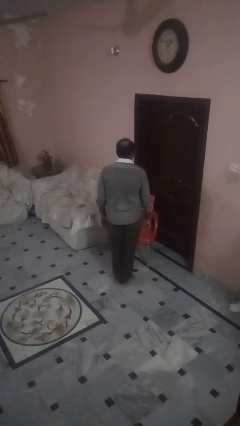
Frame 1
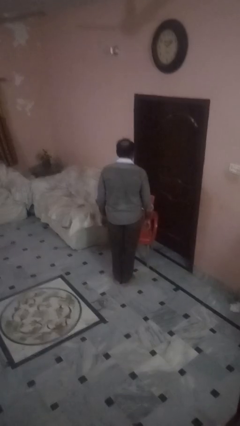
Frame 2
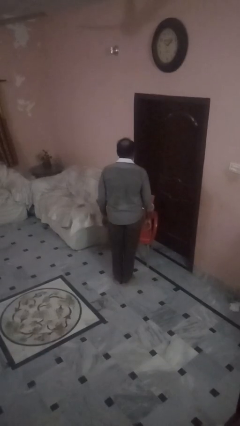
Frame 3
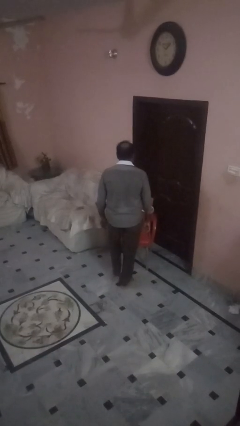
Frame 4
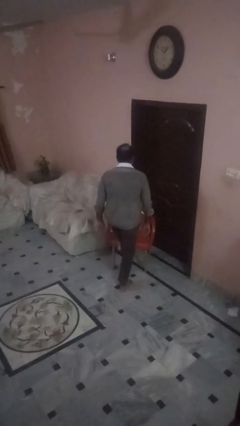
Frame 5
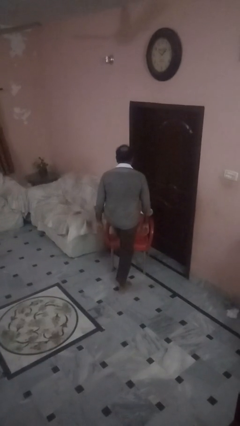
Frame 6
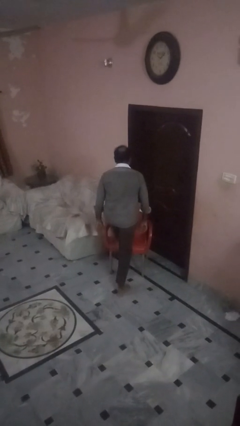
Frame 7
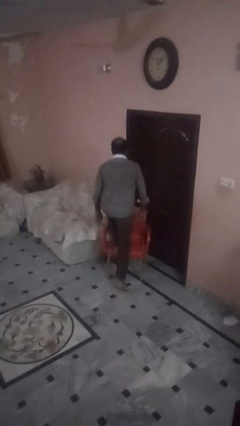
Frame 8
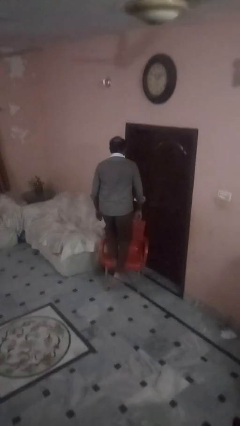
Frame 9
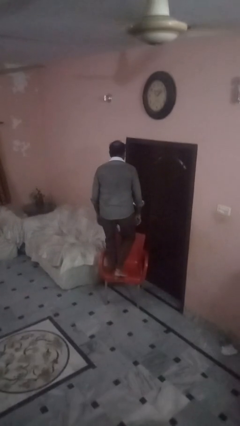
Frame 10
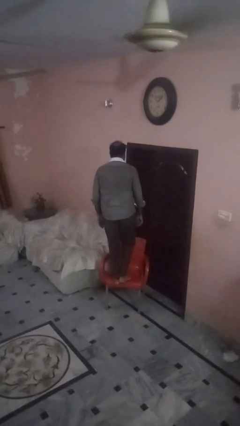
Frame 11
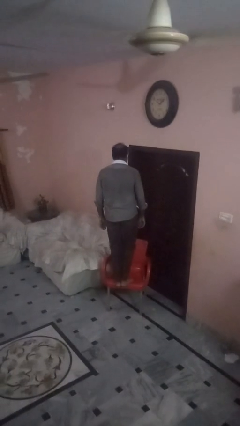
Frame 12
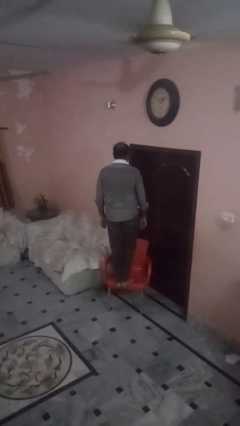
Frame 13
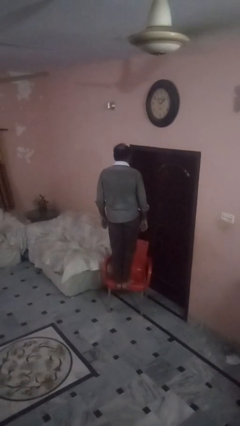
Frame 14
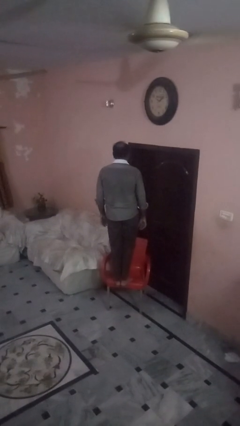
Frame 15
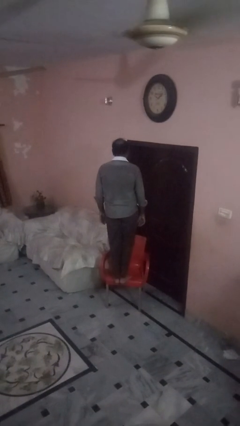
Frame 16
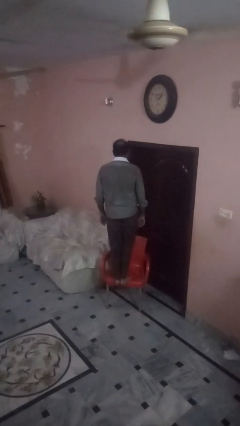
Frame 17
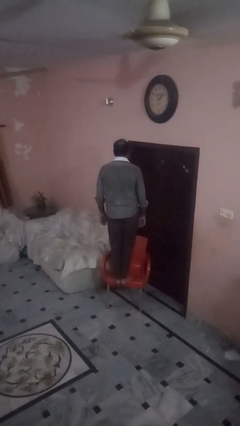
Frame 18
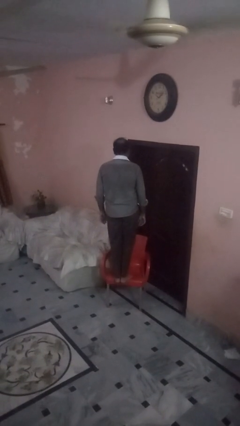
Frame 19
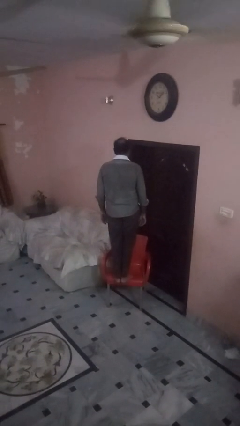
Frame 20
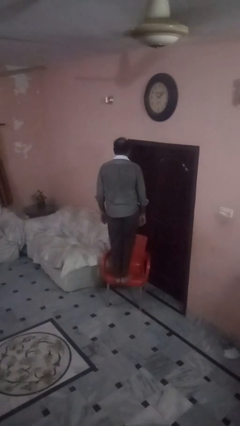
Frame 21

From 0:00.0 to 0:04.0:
person climbs on chair

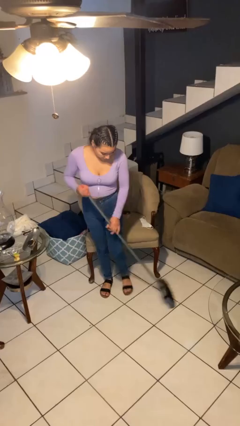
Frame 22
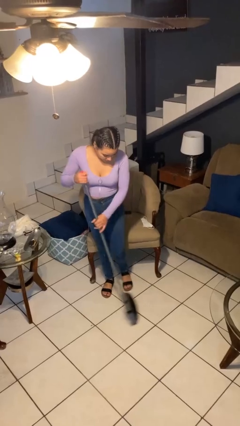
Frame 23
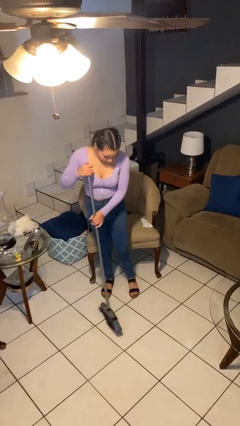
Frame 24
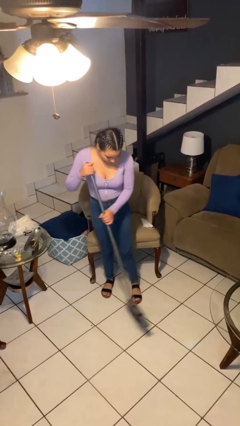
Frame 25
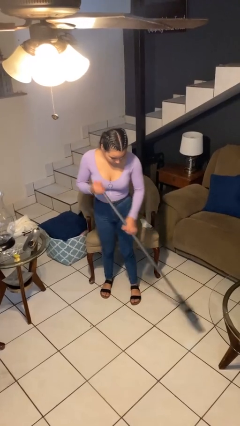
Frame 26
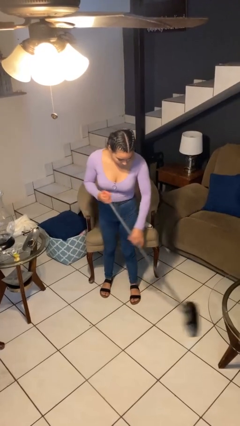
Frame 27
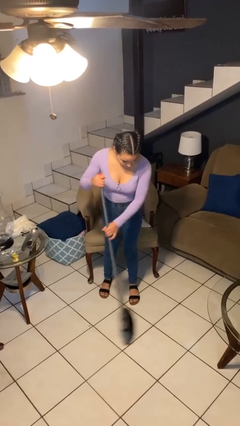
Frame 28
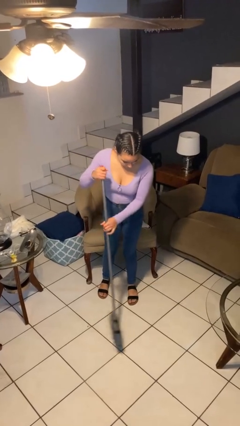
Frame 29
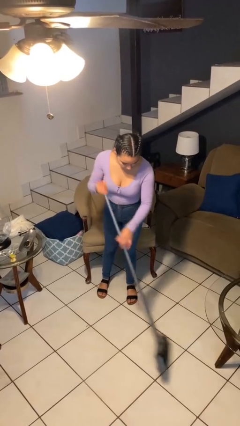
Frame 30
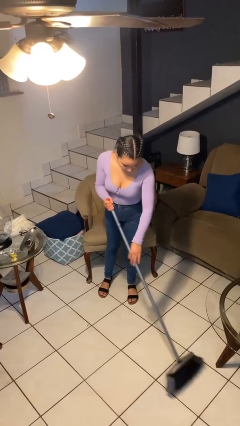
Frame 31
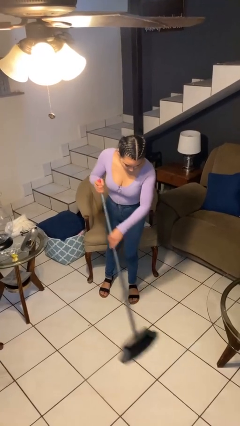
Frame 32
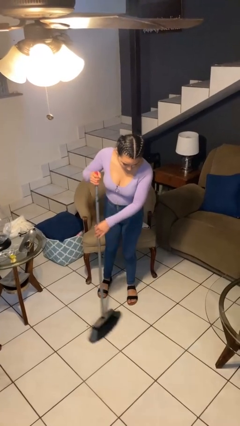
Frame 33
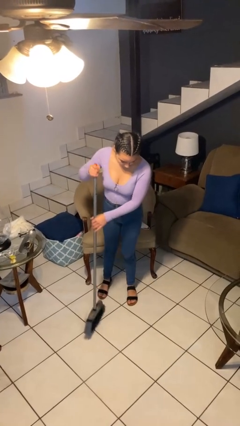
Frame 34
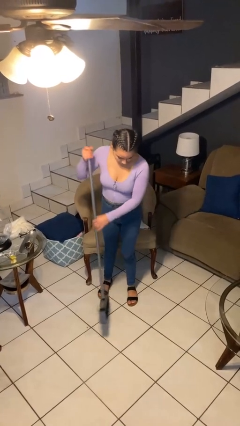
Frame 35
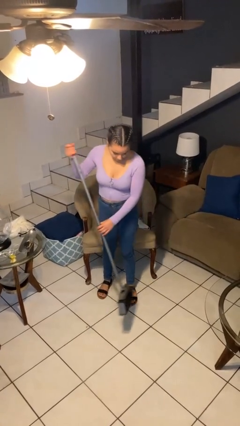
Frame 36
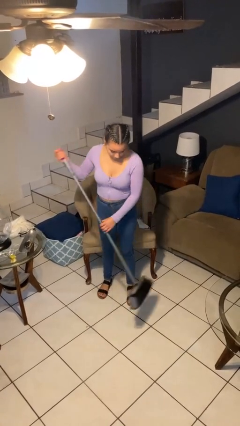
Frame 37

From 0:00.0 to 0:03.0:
person sweeps floor

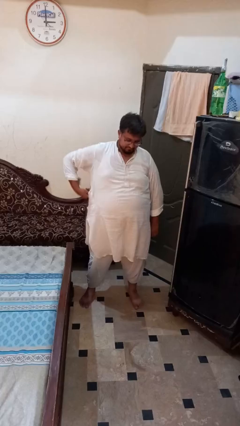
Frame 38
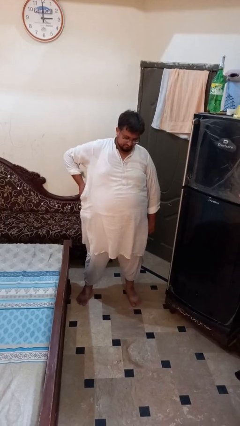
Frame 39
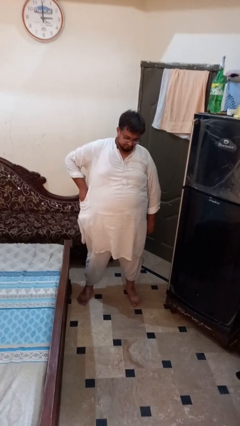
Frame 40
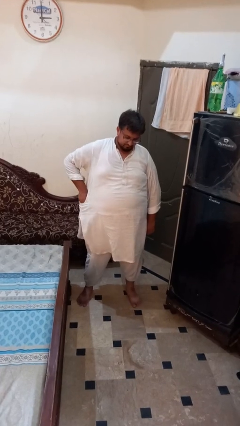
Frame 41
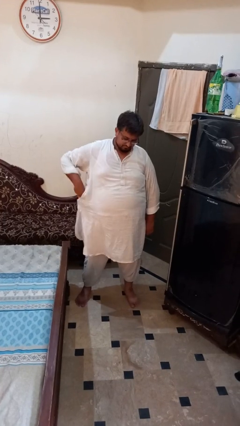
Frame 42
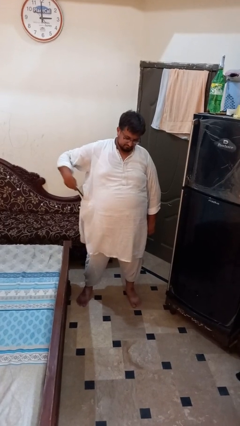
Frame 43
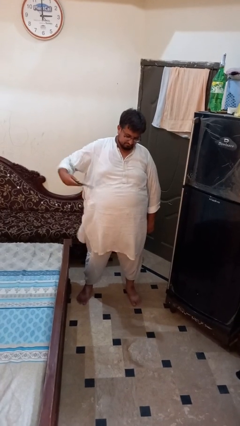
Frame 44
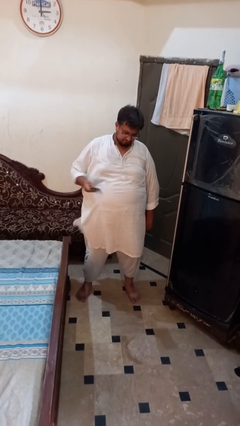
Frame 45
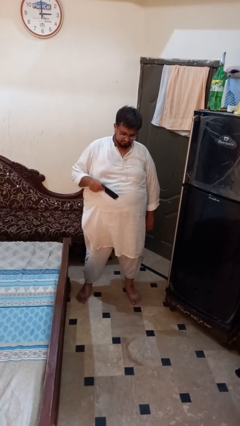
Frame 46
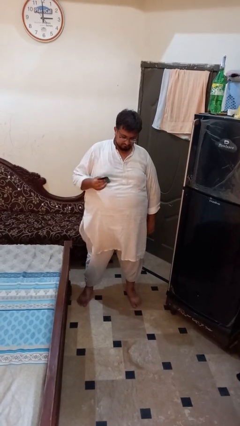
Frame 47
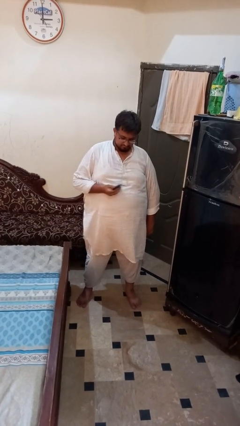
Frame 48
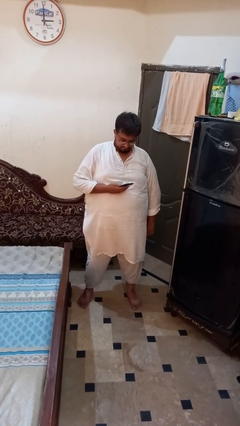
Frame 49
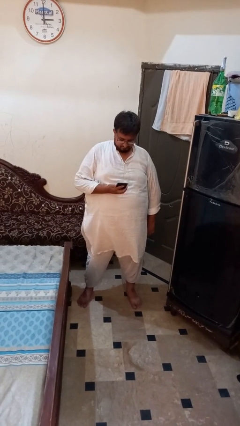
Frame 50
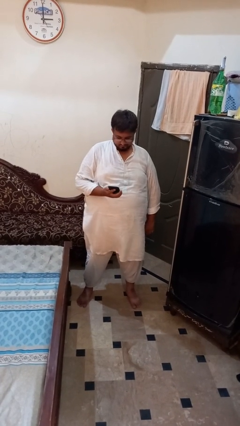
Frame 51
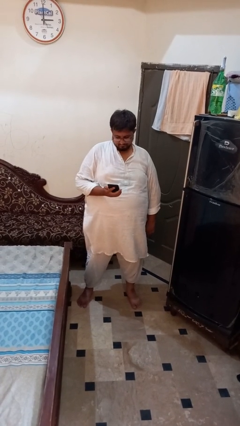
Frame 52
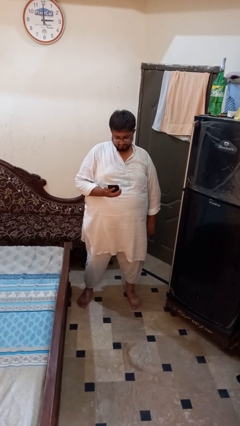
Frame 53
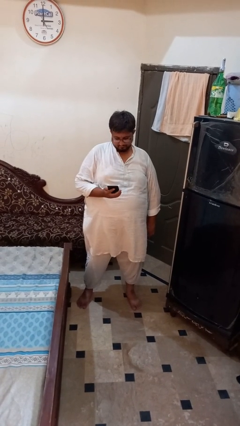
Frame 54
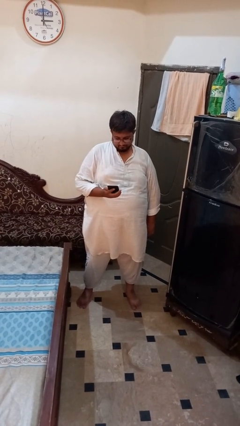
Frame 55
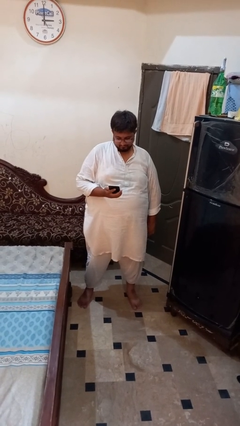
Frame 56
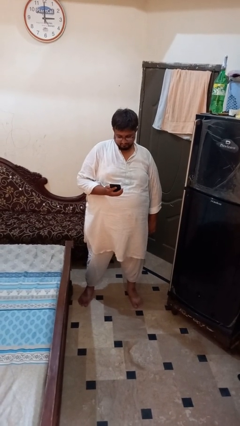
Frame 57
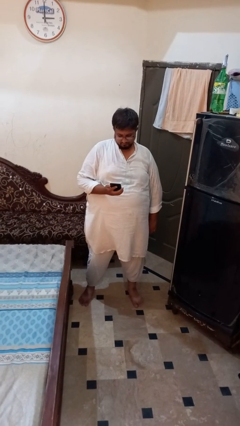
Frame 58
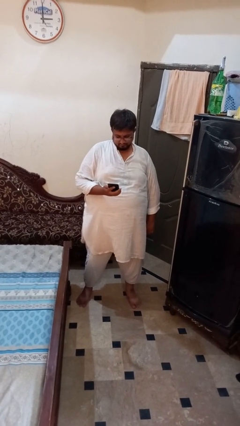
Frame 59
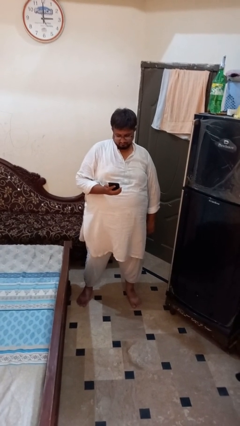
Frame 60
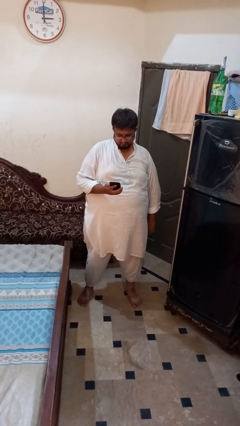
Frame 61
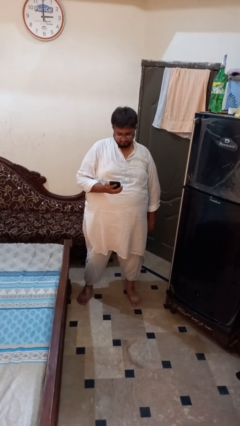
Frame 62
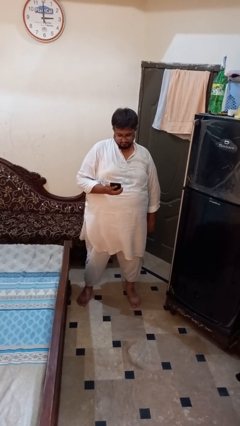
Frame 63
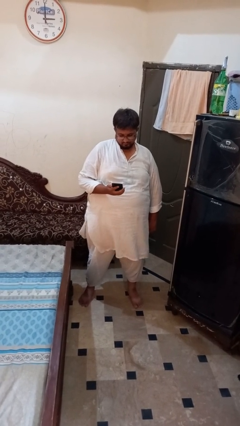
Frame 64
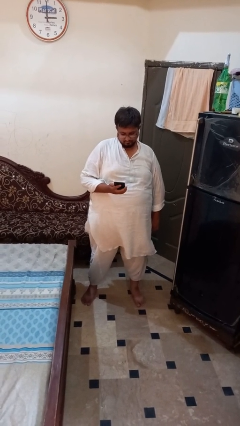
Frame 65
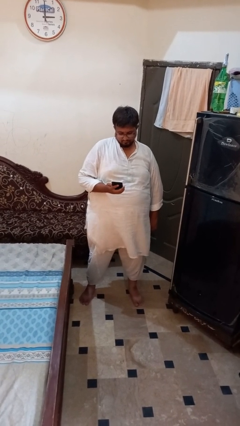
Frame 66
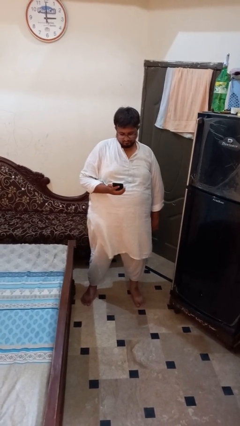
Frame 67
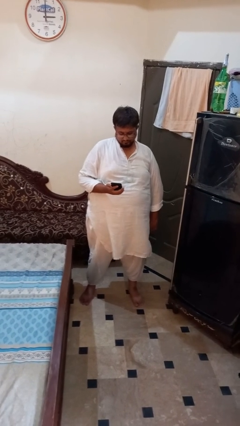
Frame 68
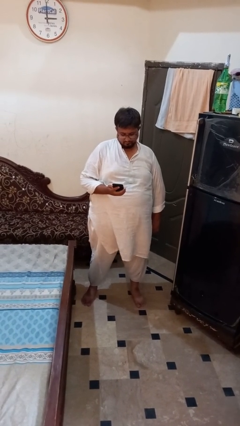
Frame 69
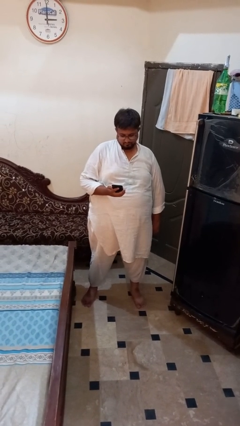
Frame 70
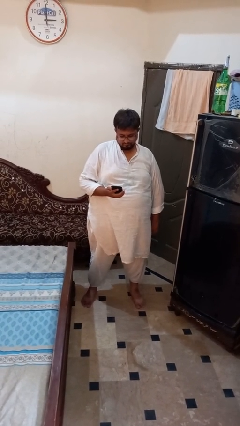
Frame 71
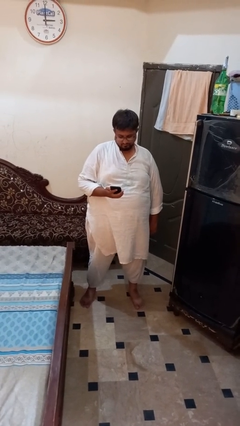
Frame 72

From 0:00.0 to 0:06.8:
person takes phone from pocket

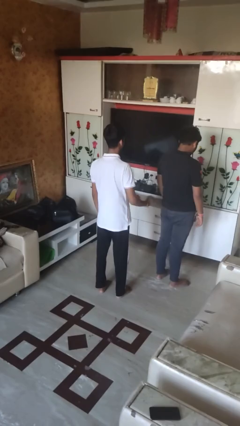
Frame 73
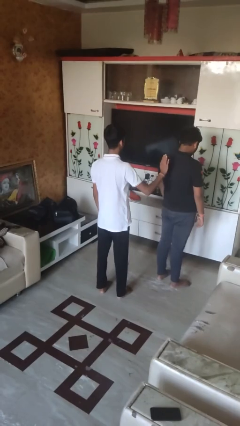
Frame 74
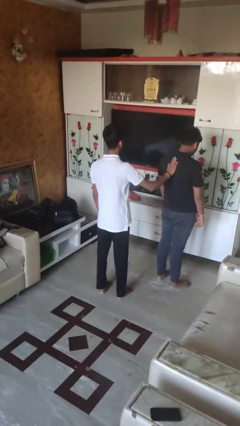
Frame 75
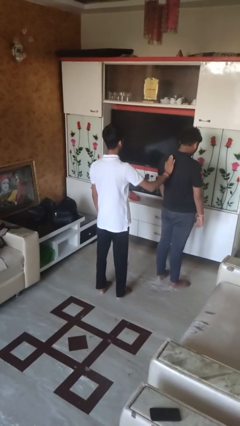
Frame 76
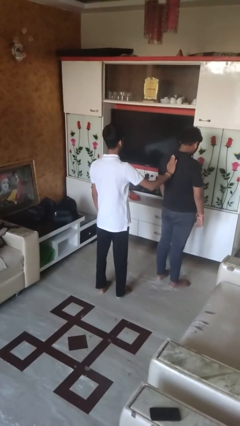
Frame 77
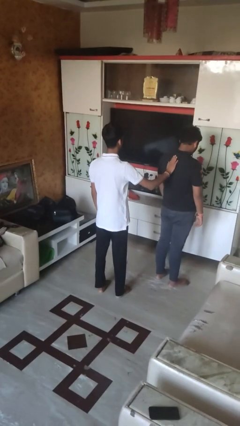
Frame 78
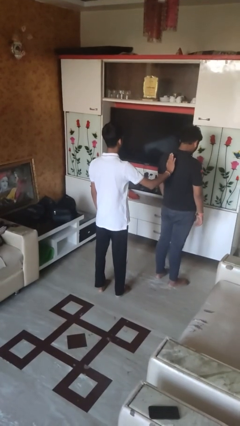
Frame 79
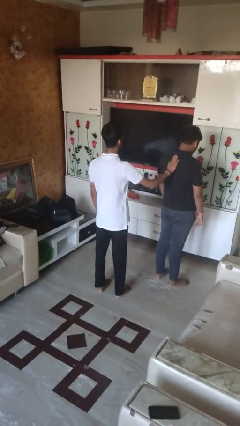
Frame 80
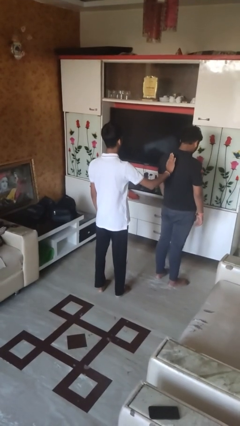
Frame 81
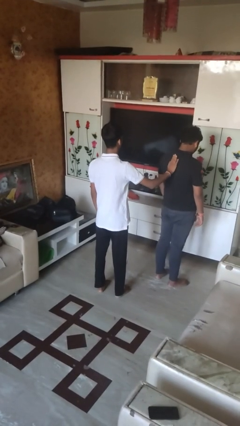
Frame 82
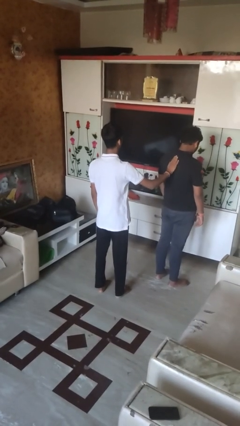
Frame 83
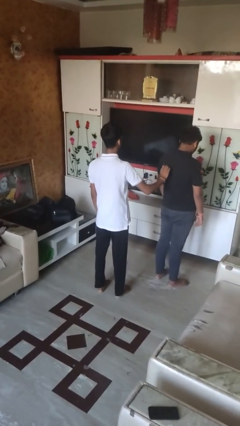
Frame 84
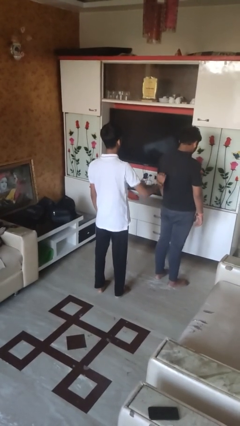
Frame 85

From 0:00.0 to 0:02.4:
person touches back of person

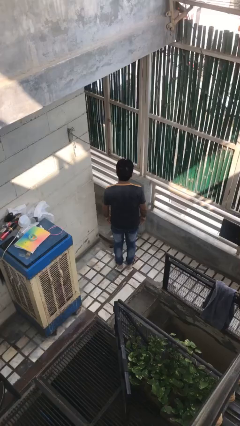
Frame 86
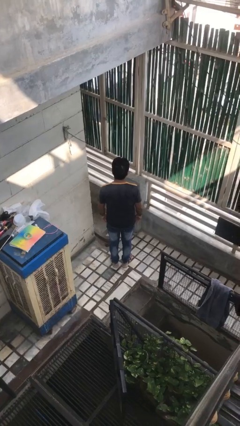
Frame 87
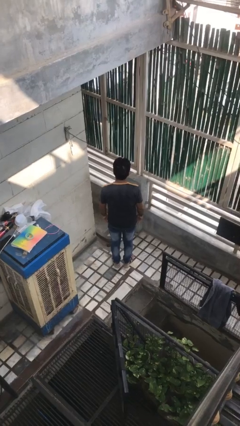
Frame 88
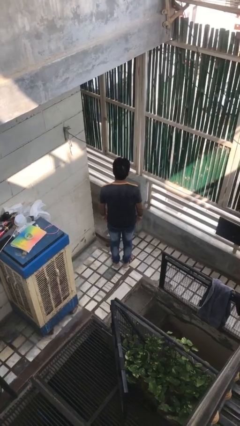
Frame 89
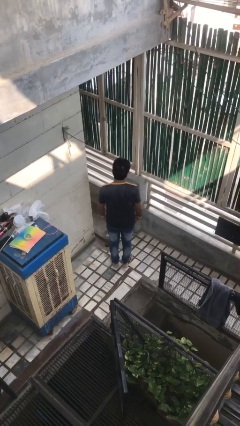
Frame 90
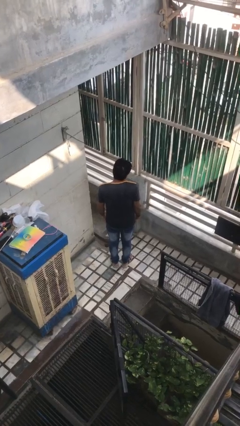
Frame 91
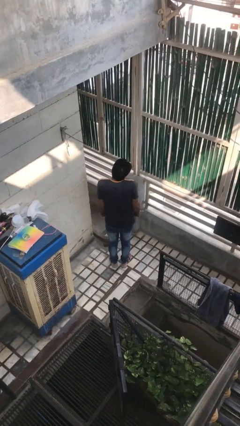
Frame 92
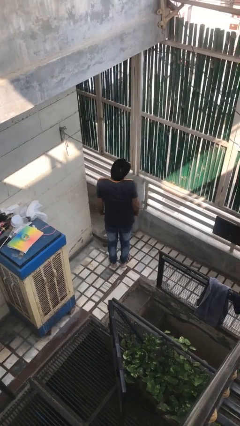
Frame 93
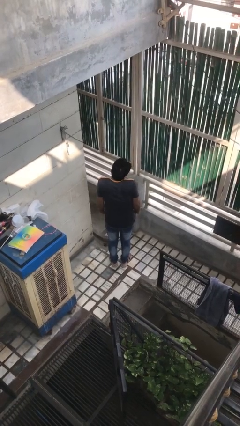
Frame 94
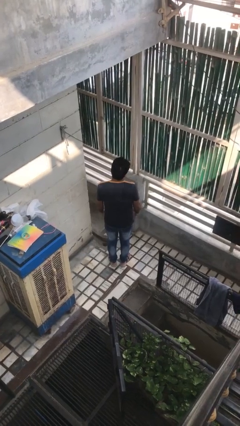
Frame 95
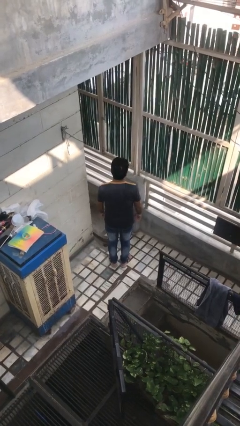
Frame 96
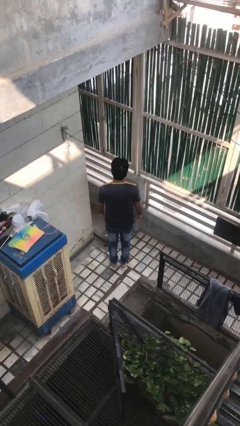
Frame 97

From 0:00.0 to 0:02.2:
person shrugs
